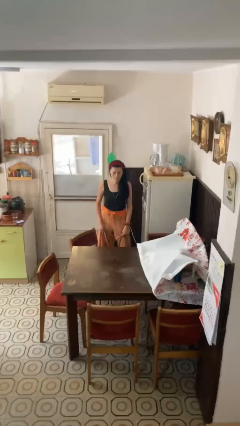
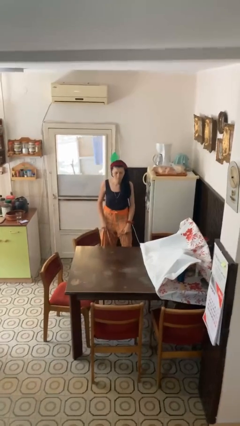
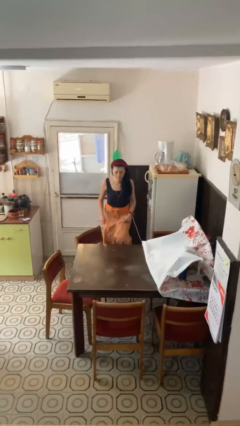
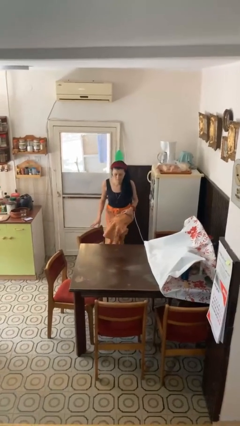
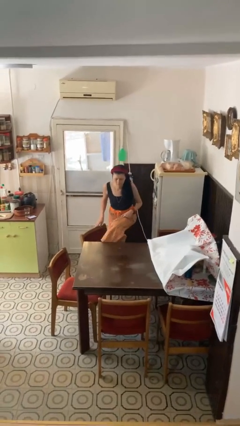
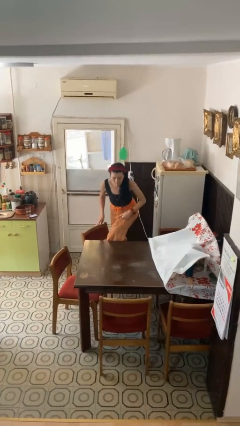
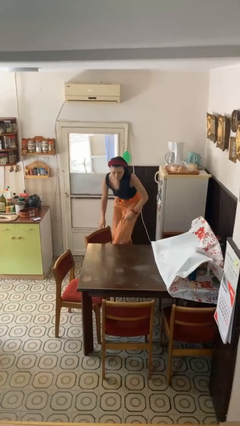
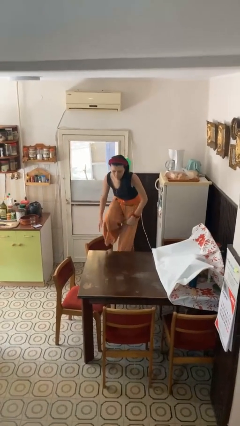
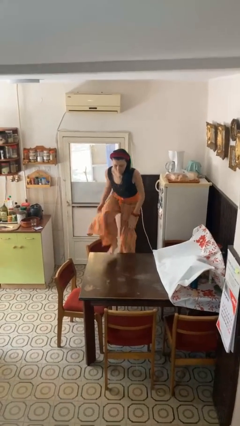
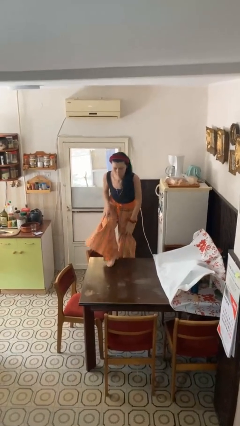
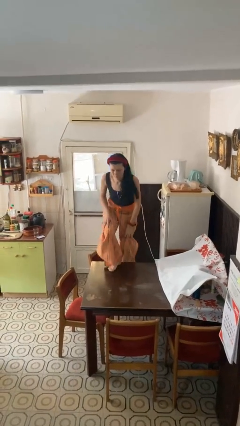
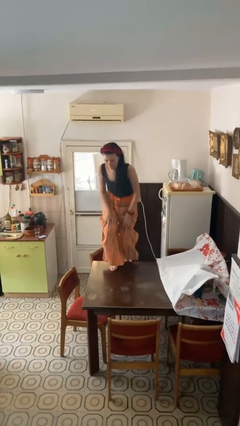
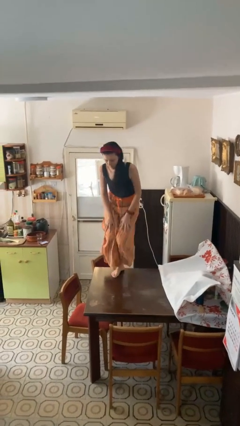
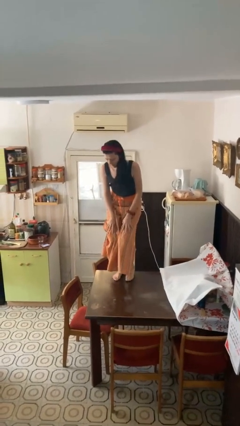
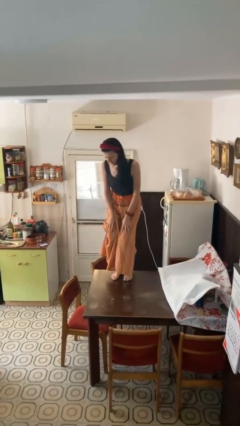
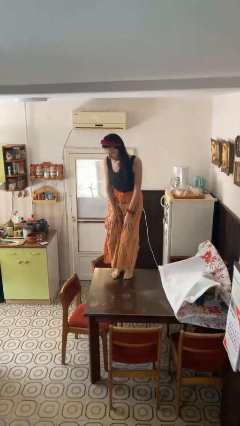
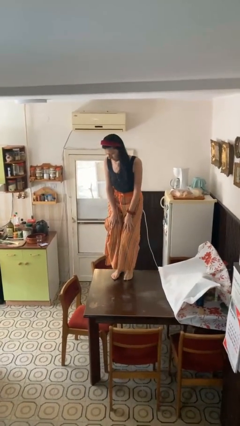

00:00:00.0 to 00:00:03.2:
person climbs on table

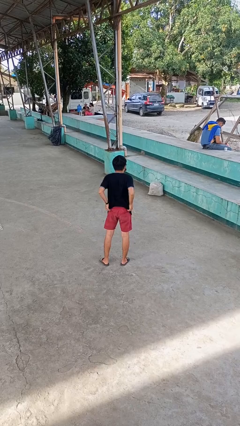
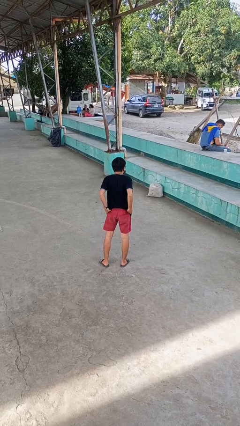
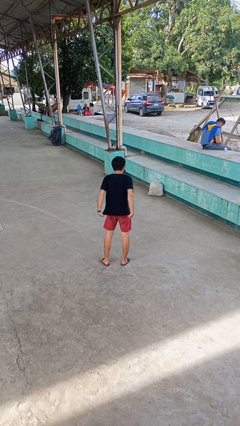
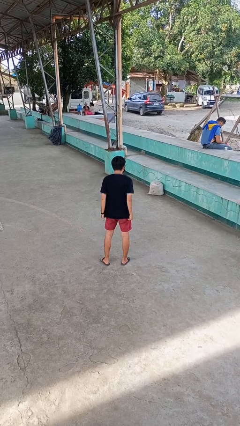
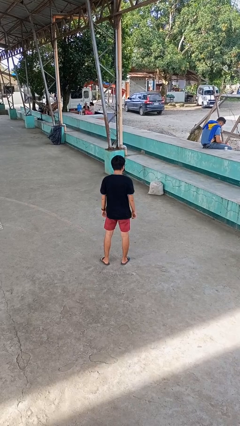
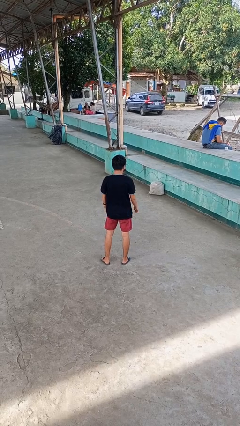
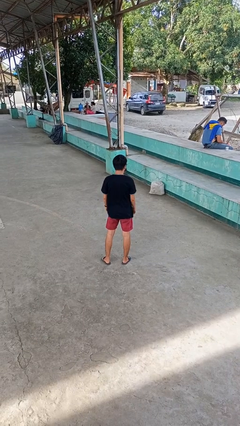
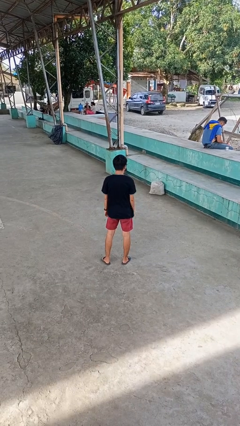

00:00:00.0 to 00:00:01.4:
person untucks shirt

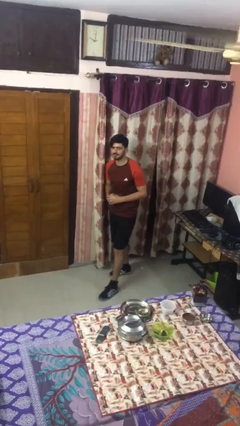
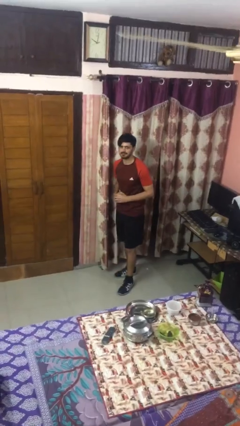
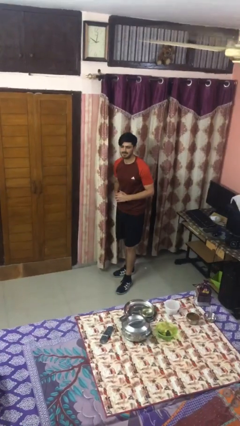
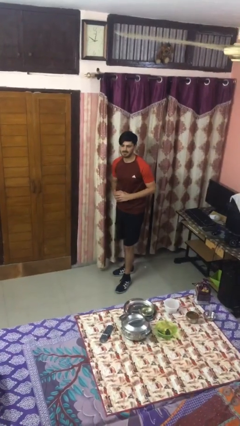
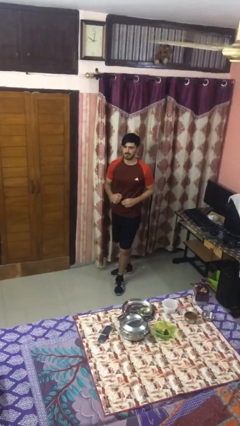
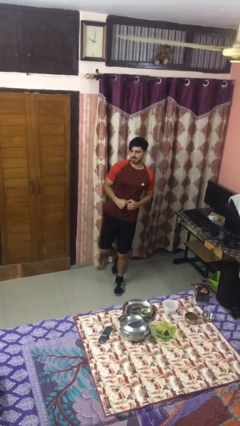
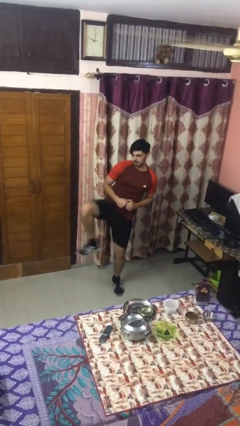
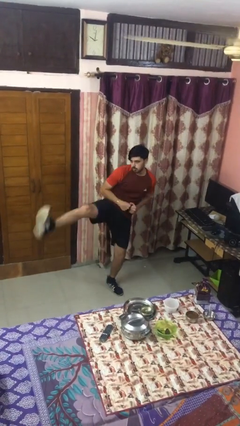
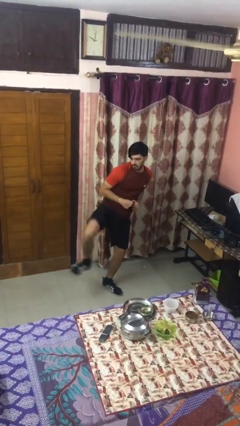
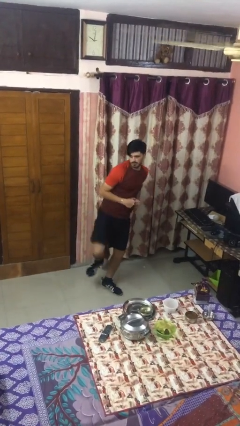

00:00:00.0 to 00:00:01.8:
person karate kicks

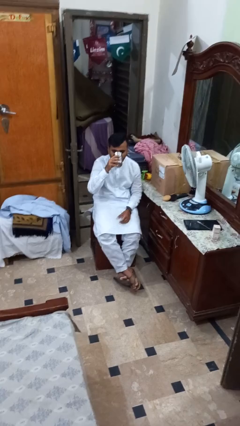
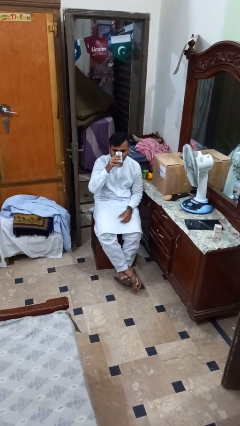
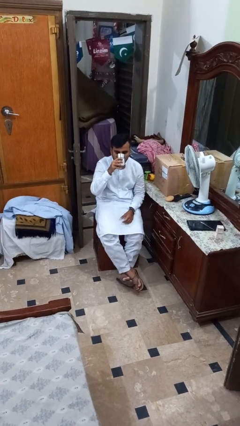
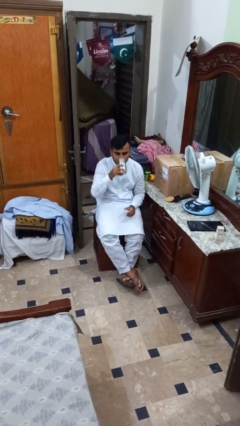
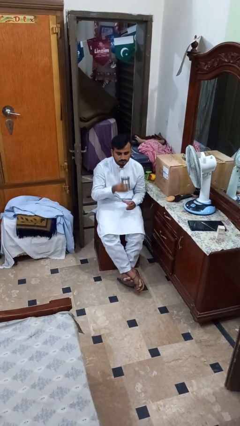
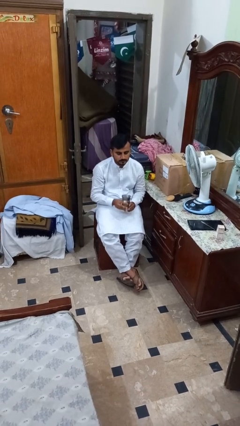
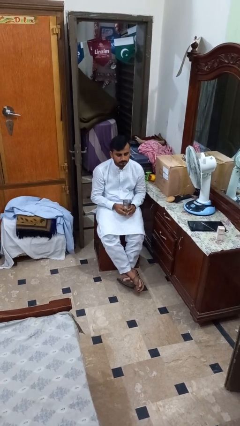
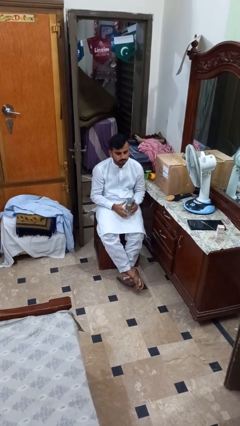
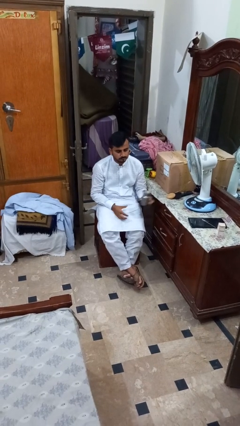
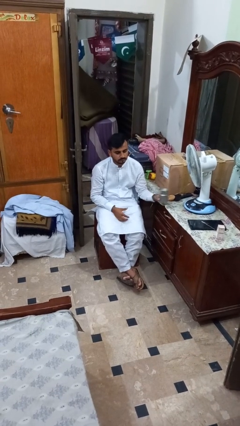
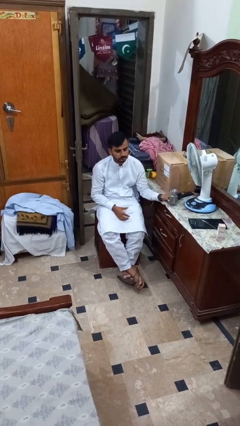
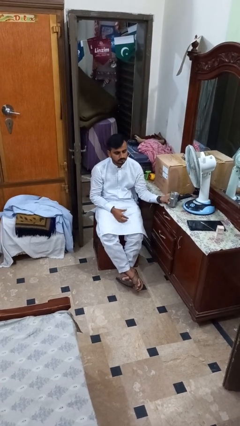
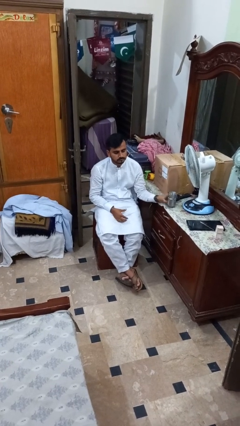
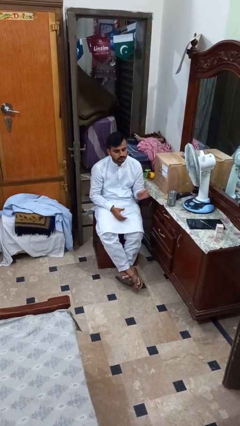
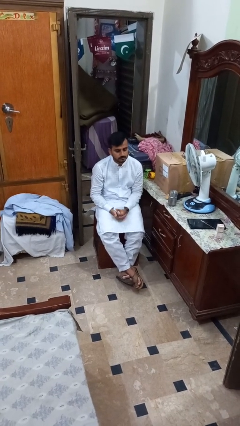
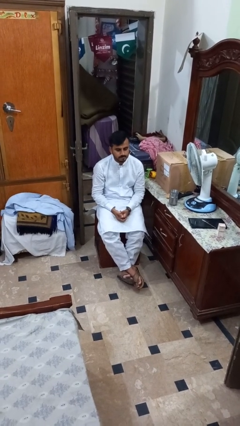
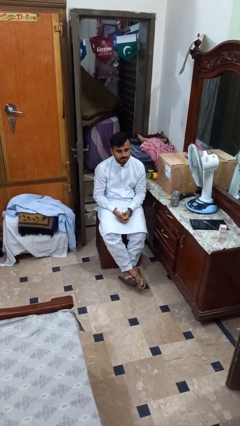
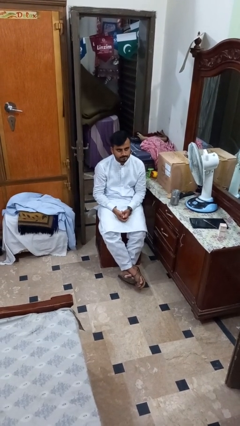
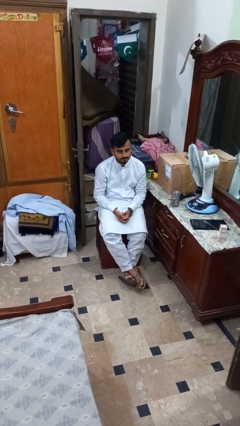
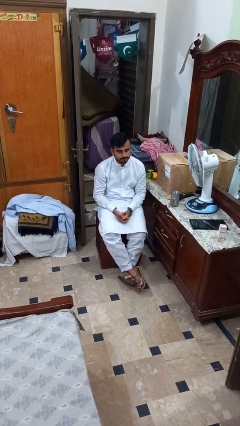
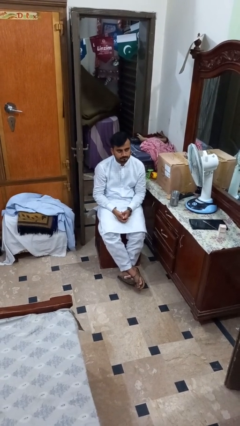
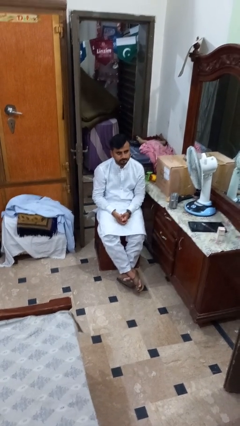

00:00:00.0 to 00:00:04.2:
person puts down object on table

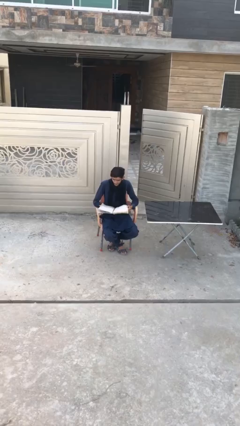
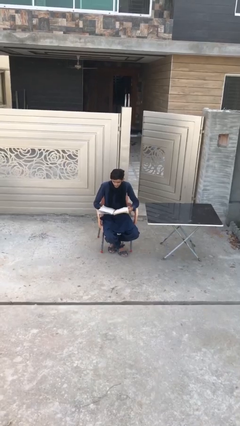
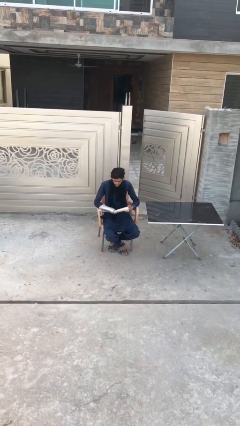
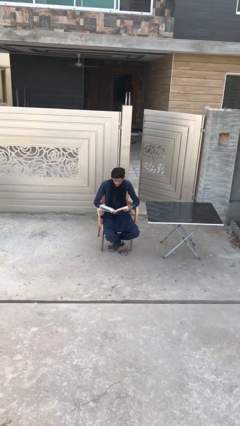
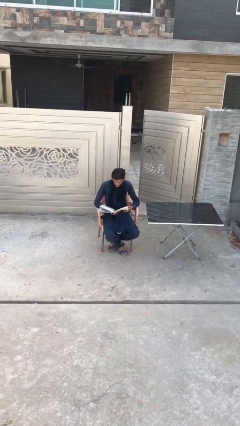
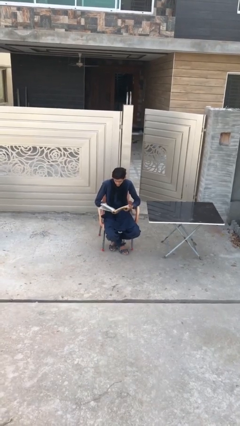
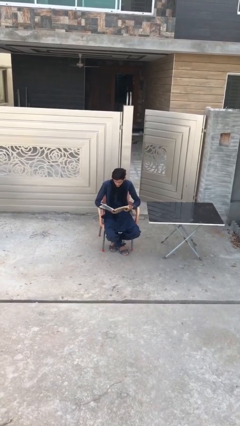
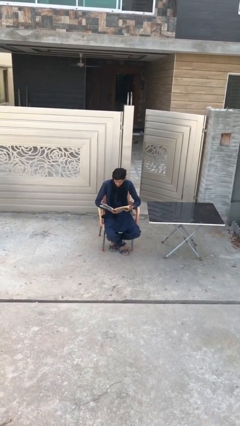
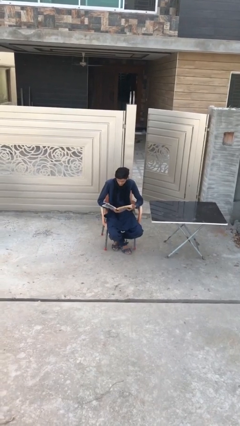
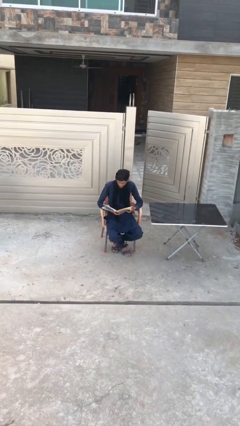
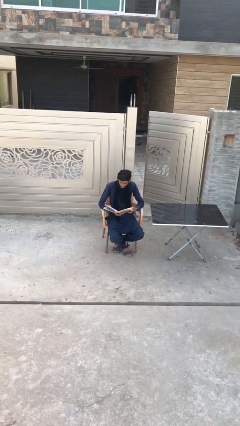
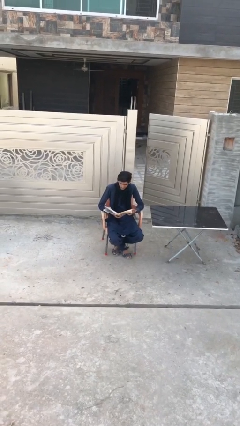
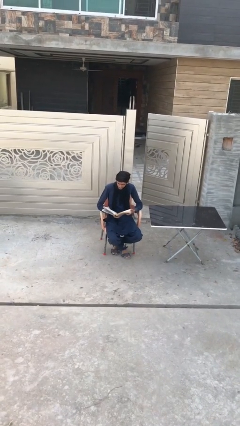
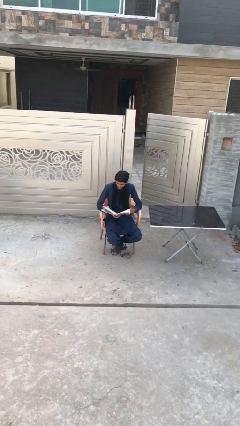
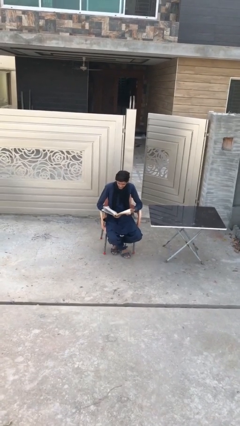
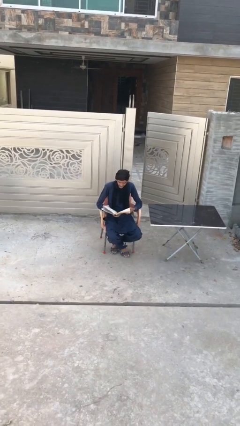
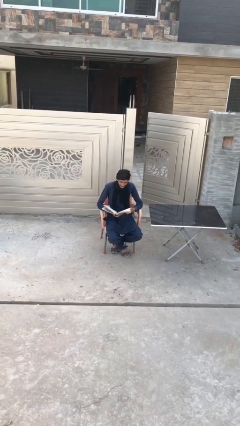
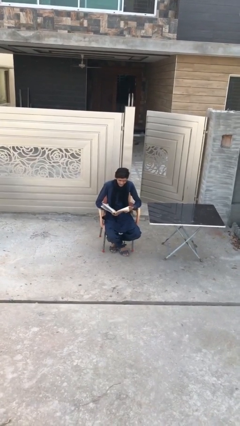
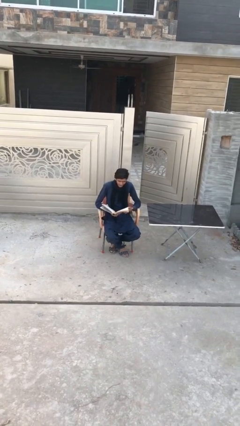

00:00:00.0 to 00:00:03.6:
person reads document

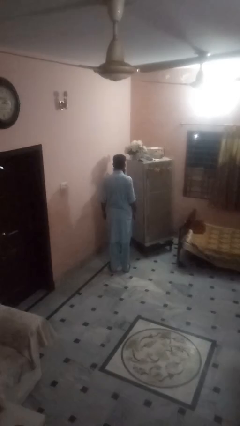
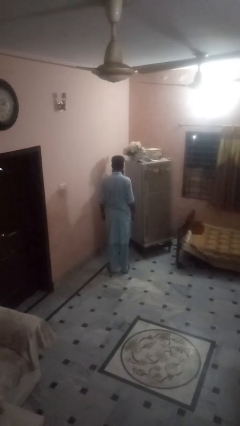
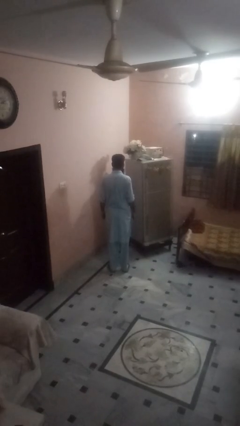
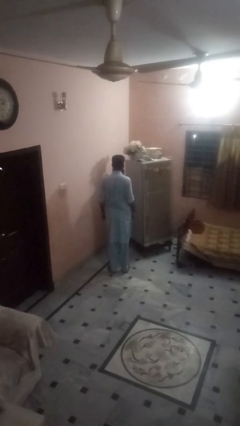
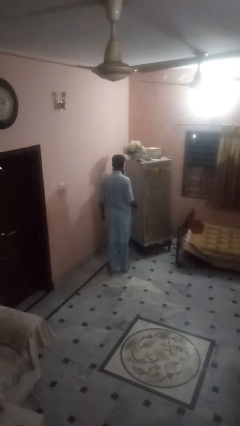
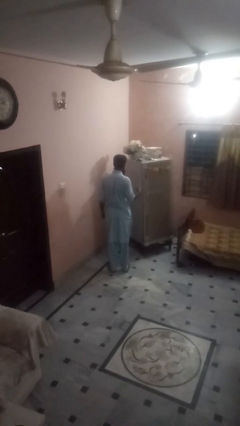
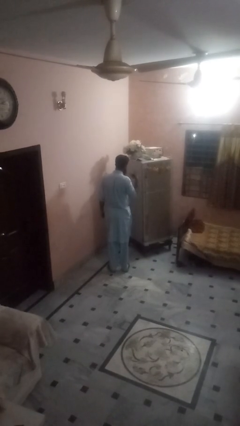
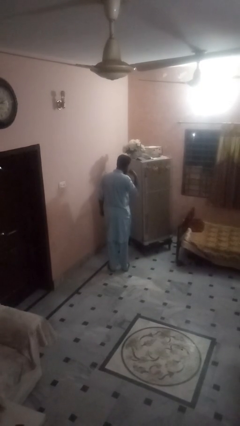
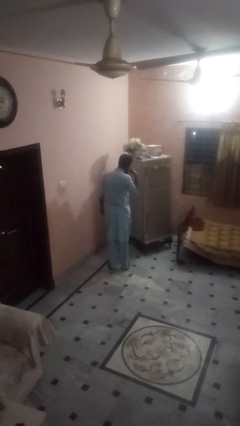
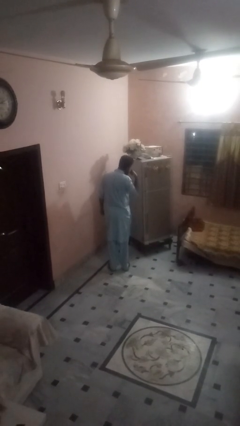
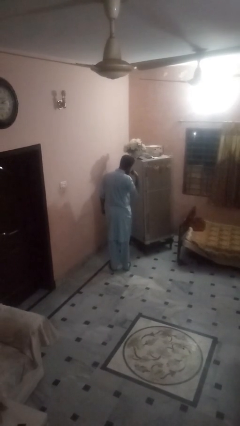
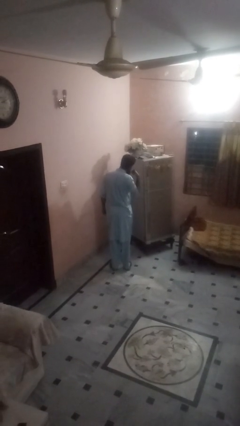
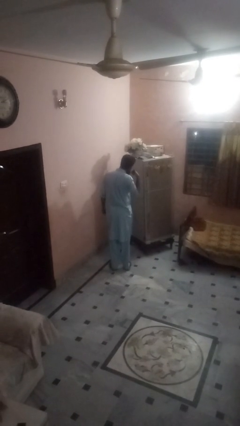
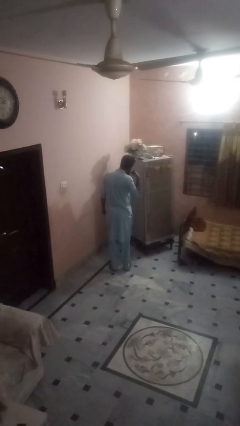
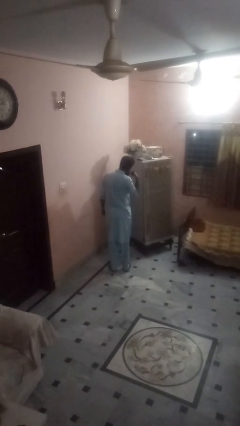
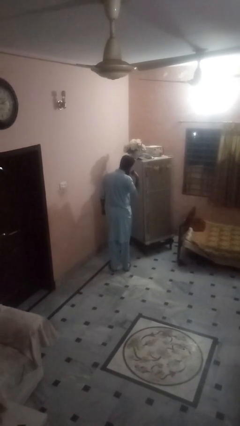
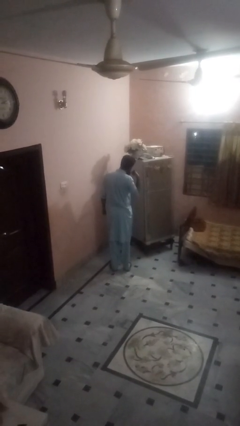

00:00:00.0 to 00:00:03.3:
person gestures call me
